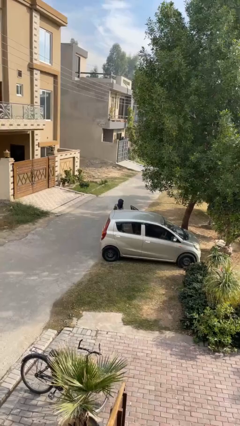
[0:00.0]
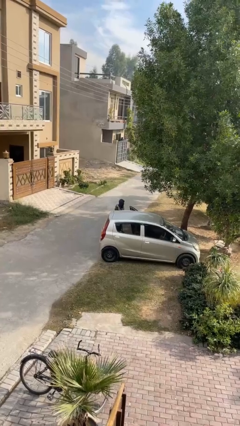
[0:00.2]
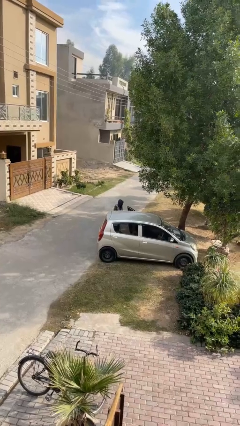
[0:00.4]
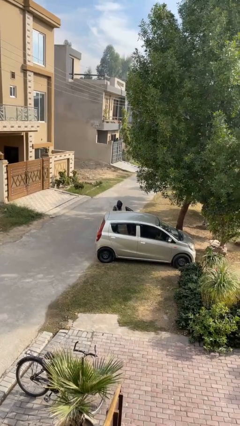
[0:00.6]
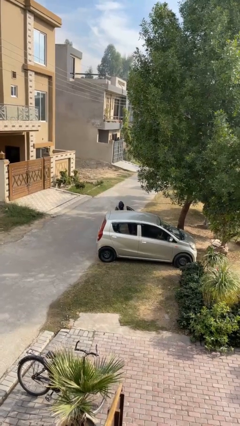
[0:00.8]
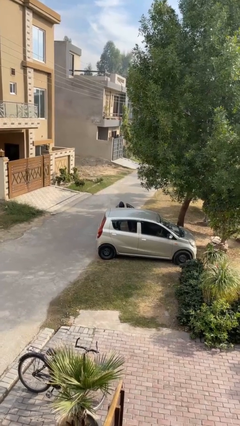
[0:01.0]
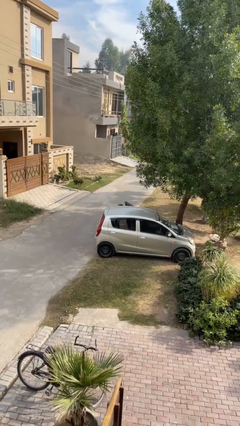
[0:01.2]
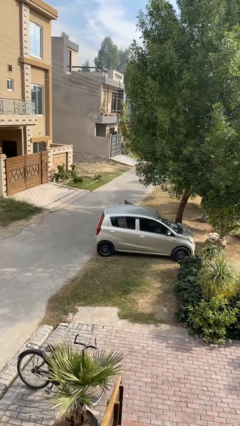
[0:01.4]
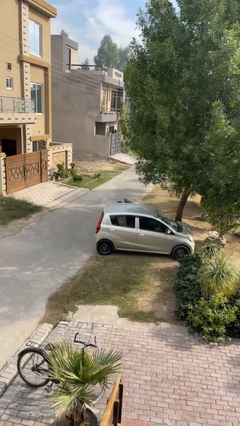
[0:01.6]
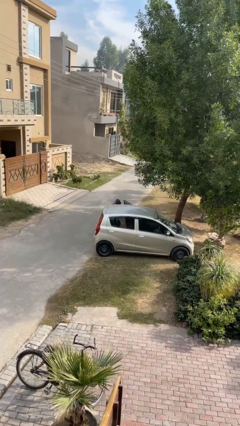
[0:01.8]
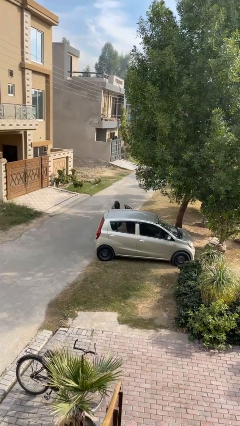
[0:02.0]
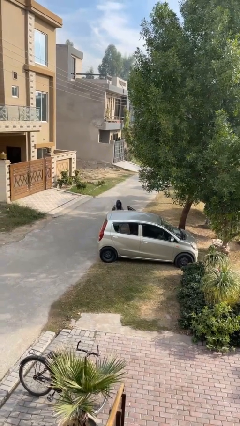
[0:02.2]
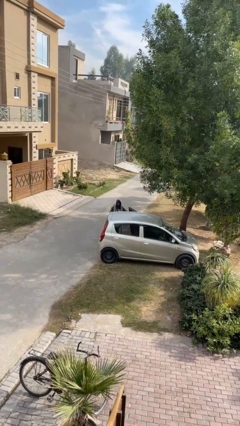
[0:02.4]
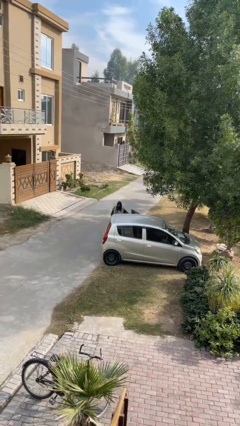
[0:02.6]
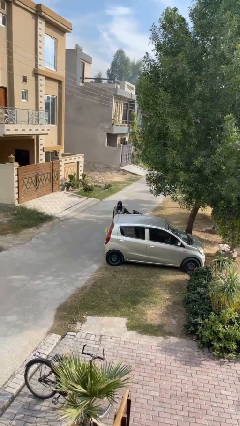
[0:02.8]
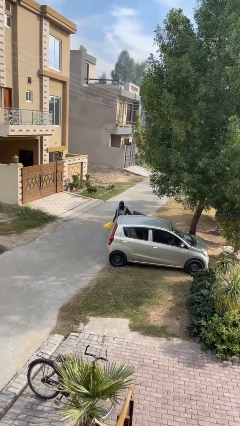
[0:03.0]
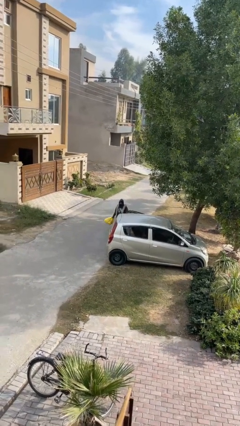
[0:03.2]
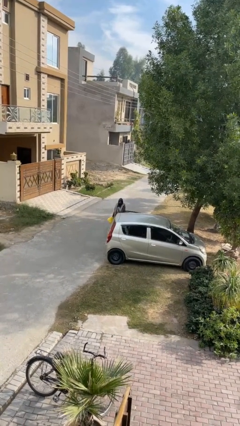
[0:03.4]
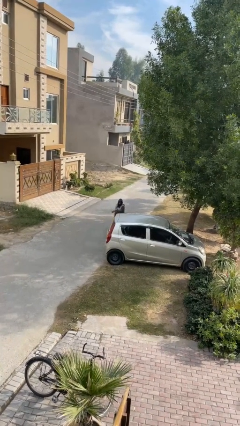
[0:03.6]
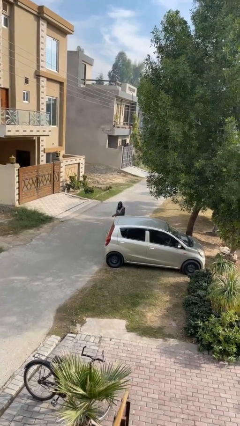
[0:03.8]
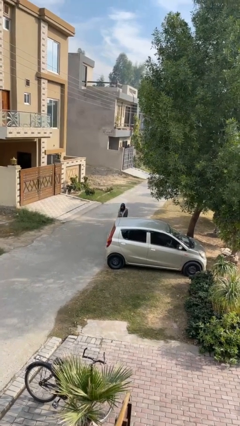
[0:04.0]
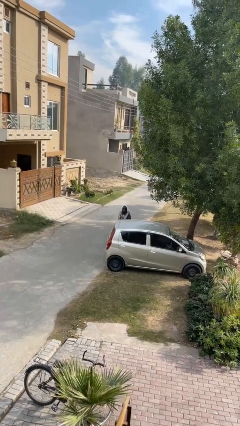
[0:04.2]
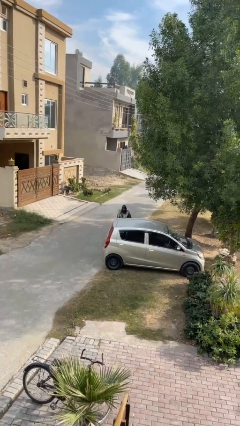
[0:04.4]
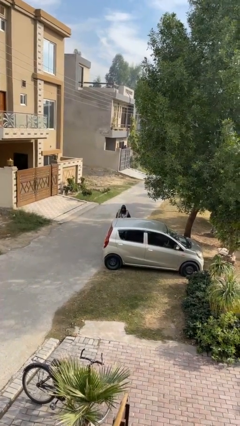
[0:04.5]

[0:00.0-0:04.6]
person unloads car

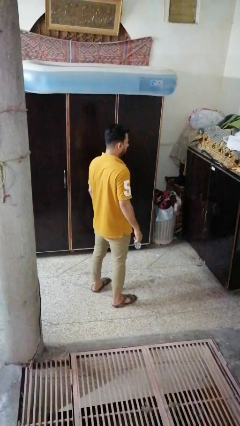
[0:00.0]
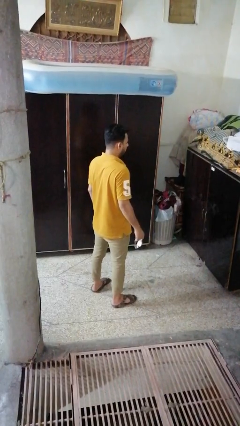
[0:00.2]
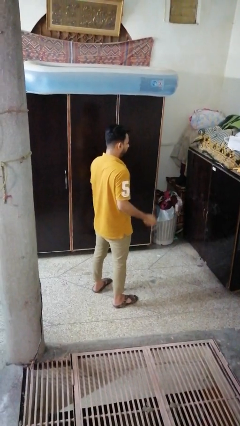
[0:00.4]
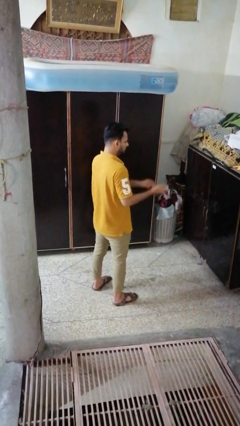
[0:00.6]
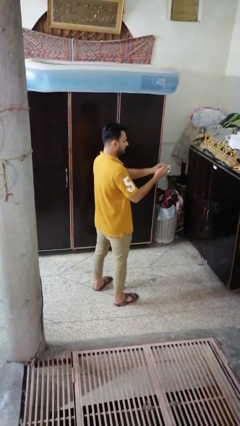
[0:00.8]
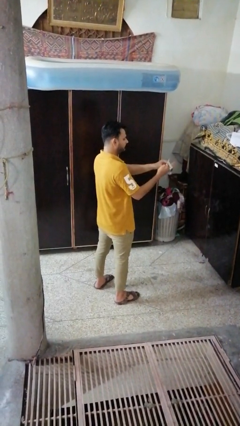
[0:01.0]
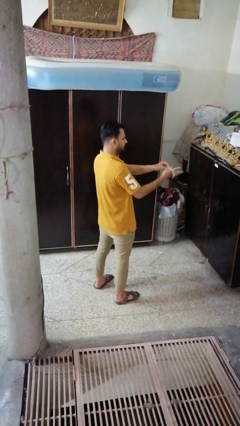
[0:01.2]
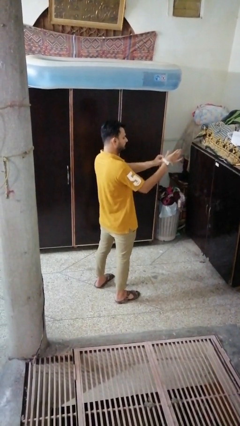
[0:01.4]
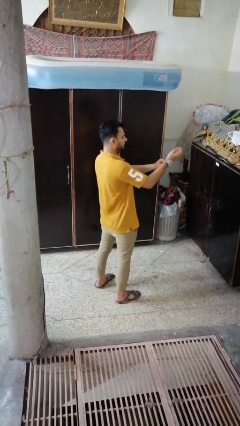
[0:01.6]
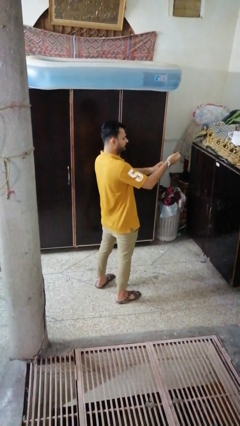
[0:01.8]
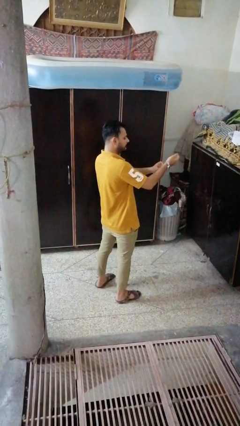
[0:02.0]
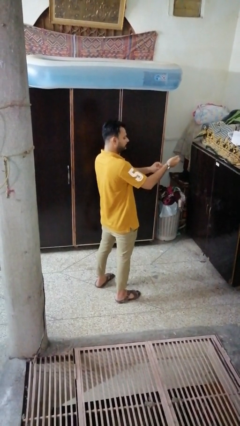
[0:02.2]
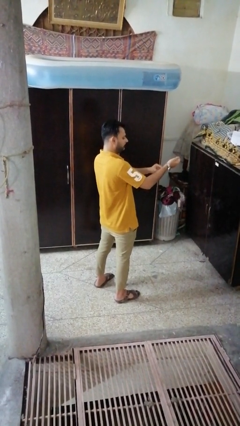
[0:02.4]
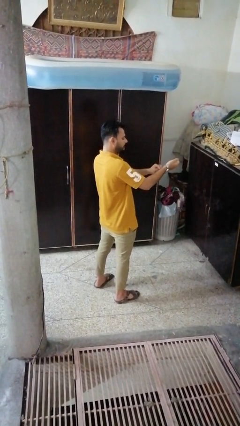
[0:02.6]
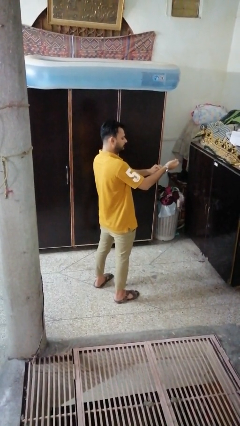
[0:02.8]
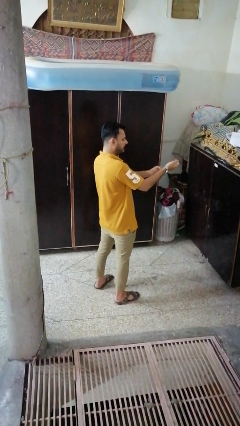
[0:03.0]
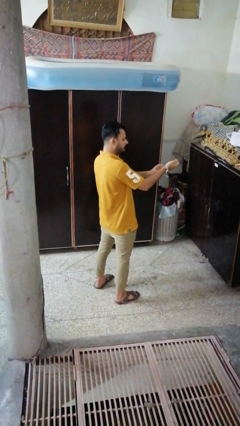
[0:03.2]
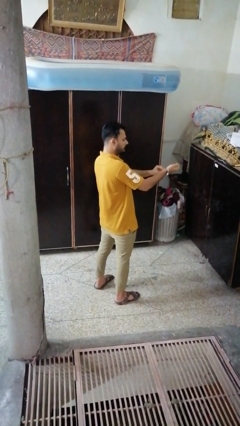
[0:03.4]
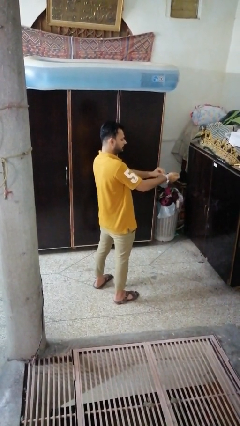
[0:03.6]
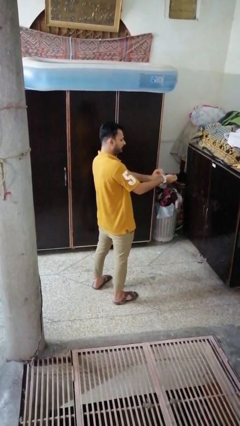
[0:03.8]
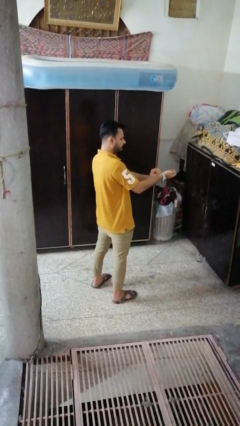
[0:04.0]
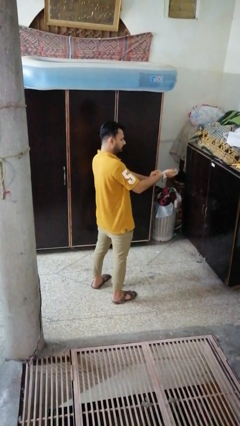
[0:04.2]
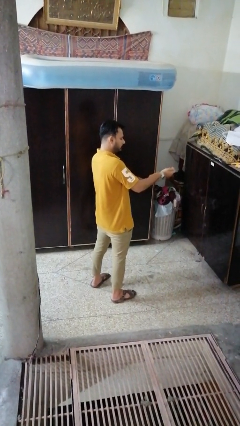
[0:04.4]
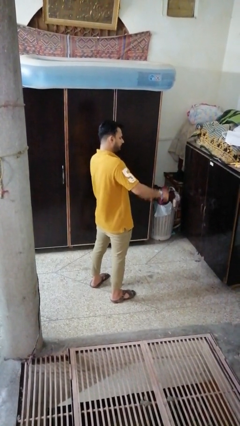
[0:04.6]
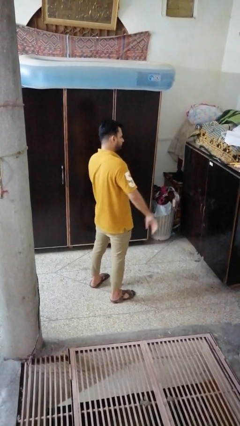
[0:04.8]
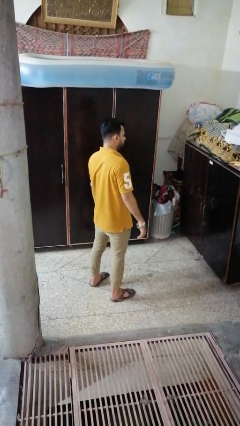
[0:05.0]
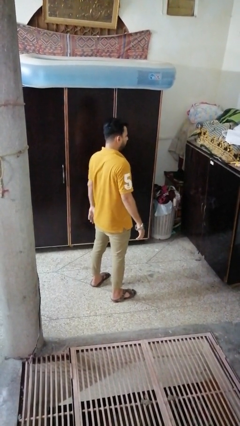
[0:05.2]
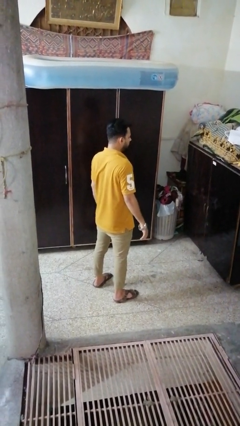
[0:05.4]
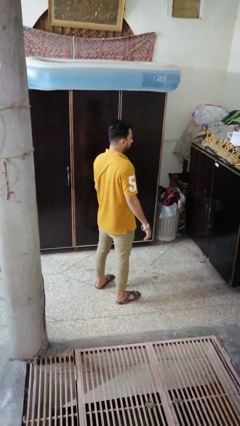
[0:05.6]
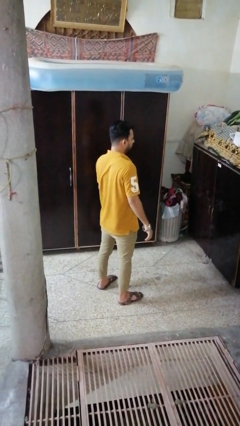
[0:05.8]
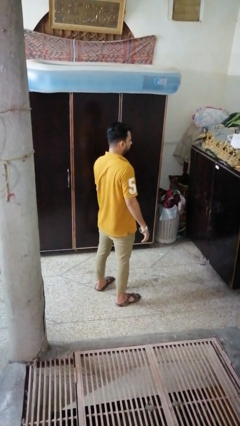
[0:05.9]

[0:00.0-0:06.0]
person puts on wristwatch

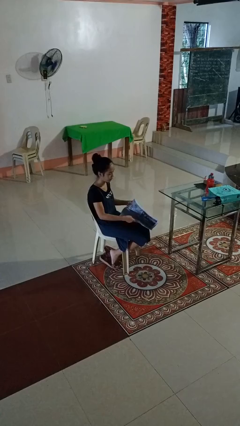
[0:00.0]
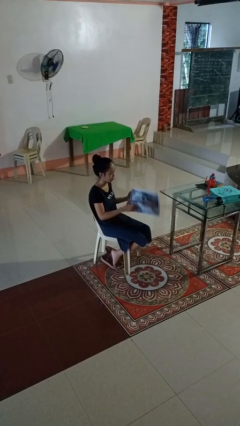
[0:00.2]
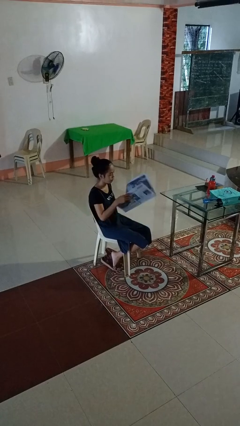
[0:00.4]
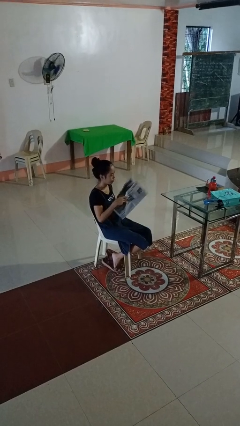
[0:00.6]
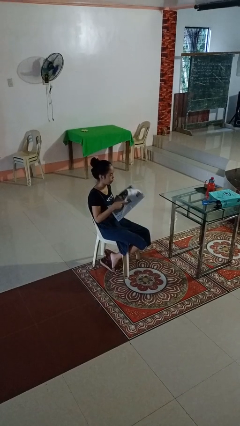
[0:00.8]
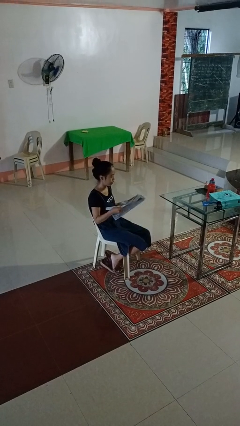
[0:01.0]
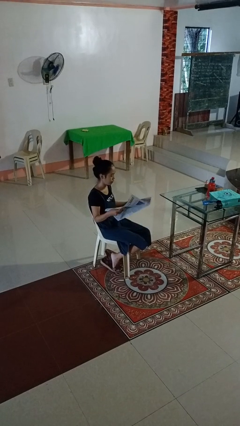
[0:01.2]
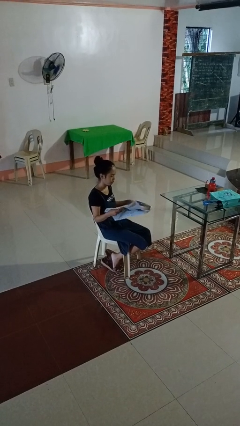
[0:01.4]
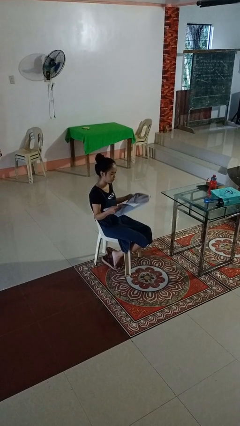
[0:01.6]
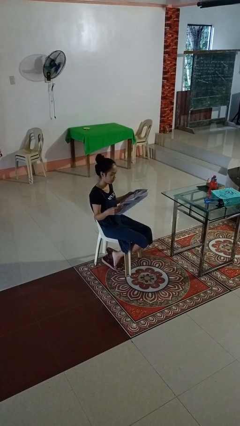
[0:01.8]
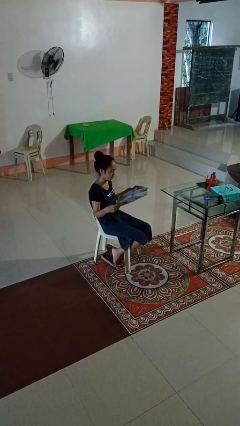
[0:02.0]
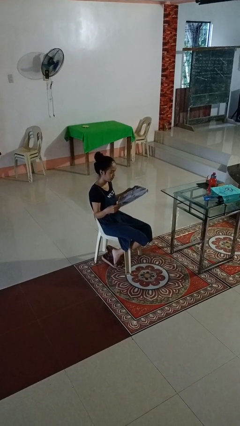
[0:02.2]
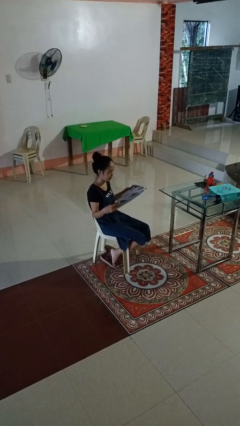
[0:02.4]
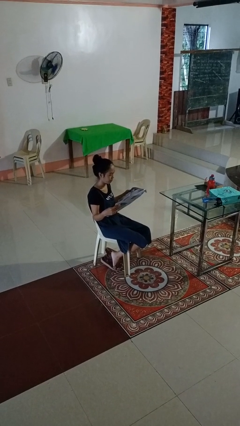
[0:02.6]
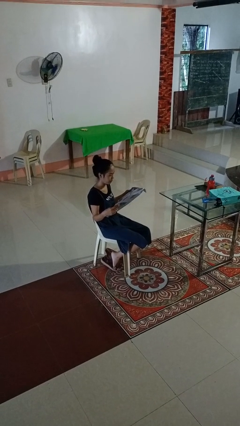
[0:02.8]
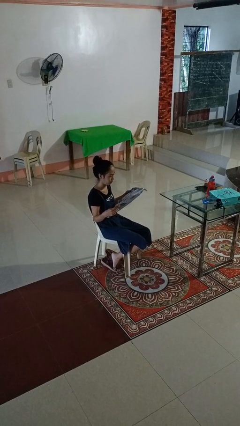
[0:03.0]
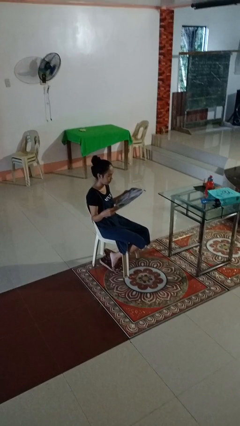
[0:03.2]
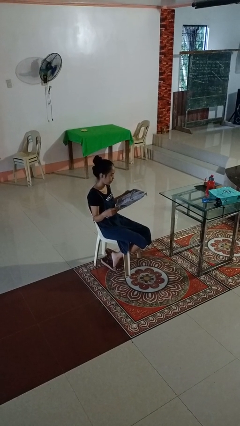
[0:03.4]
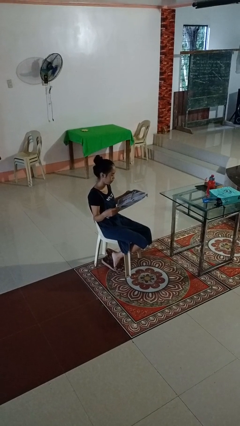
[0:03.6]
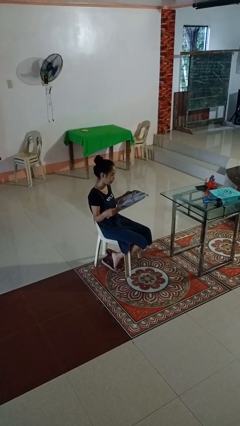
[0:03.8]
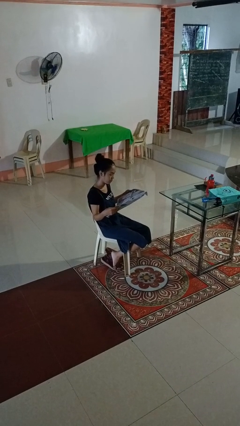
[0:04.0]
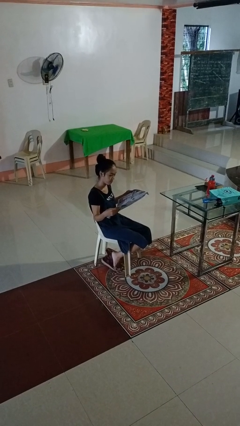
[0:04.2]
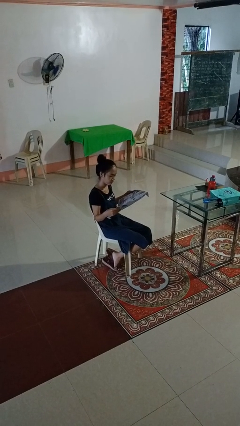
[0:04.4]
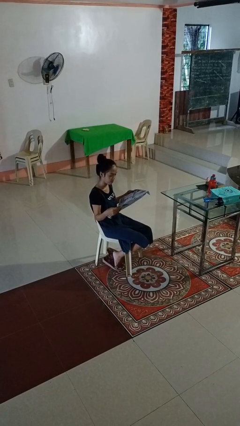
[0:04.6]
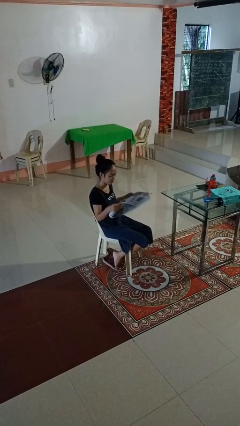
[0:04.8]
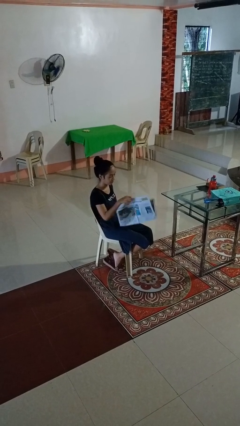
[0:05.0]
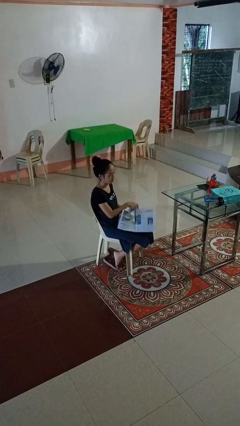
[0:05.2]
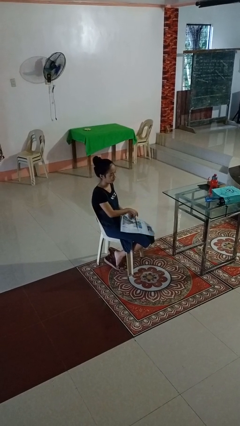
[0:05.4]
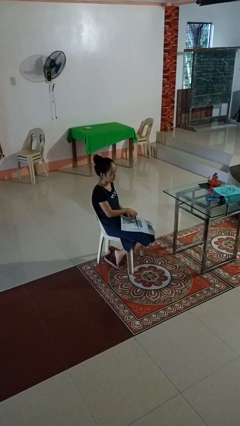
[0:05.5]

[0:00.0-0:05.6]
person reads newspaper

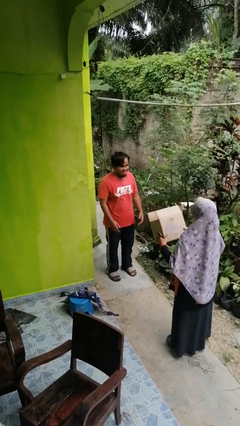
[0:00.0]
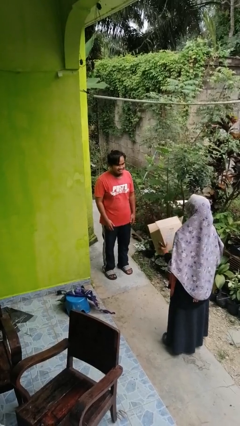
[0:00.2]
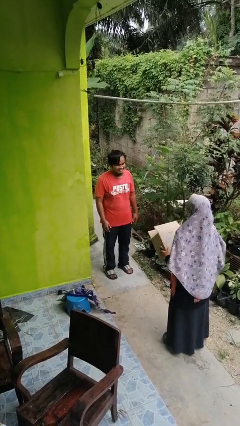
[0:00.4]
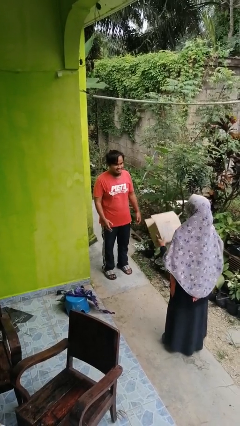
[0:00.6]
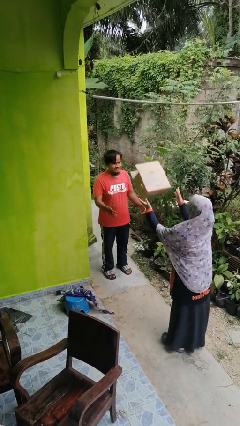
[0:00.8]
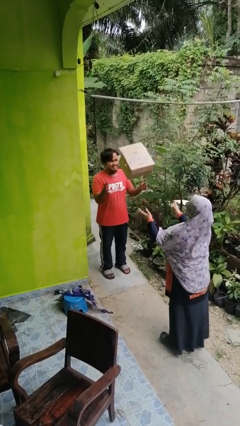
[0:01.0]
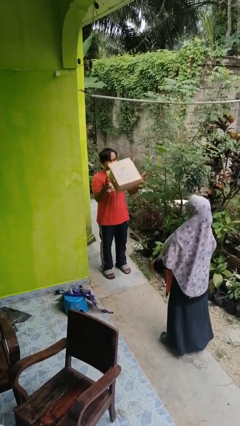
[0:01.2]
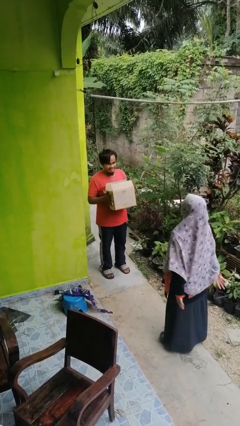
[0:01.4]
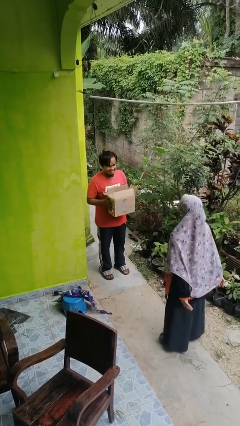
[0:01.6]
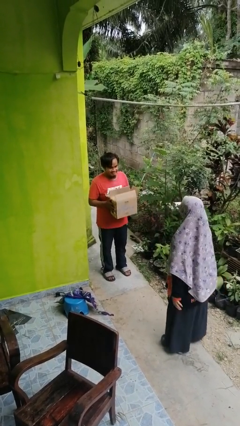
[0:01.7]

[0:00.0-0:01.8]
person catches object from person
